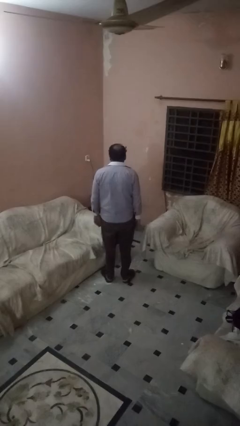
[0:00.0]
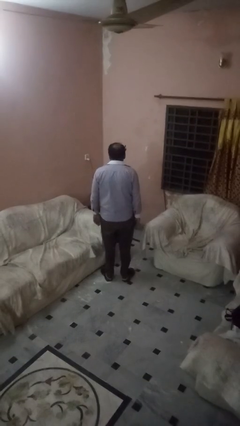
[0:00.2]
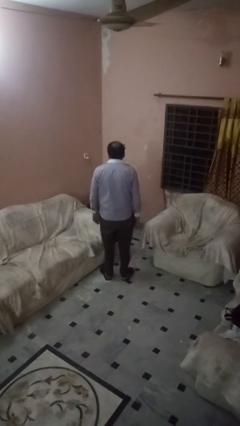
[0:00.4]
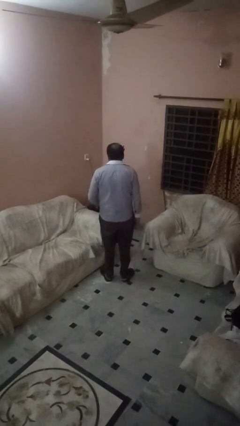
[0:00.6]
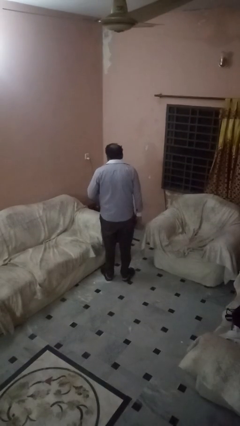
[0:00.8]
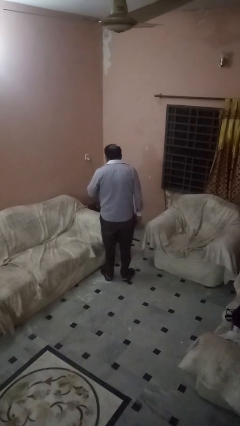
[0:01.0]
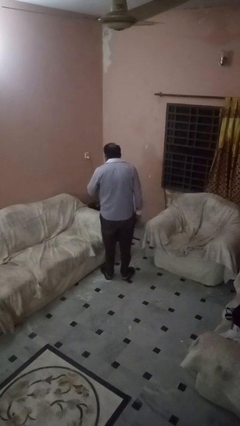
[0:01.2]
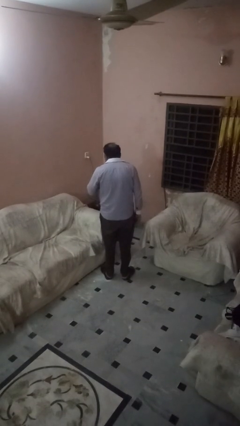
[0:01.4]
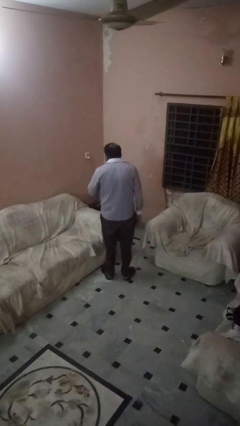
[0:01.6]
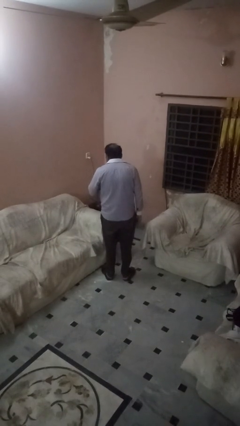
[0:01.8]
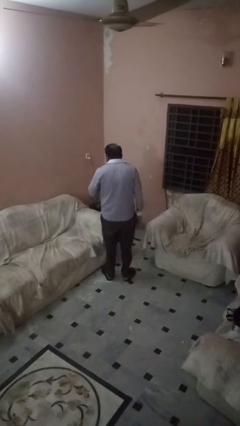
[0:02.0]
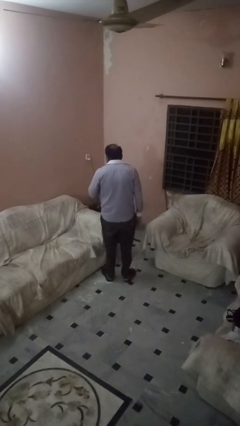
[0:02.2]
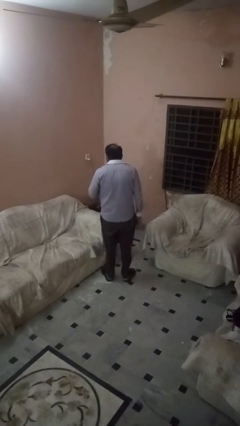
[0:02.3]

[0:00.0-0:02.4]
person gestures be quiet

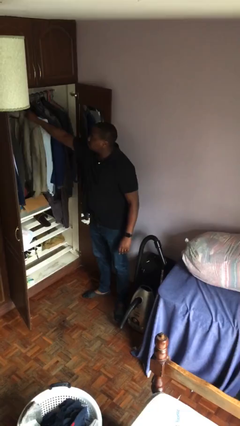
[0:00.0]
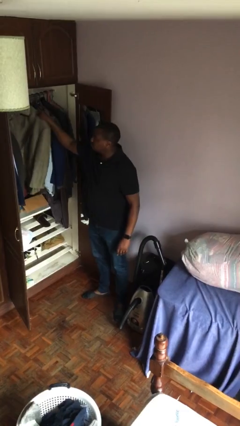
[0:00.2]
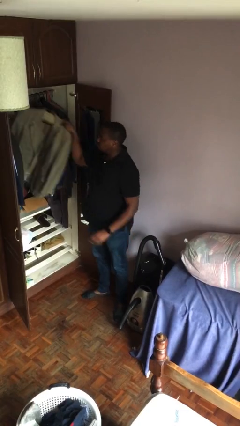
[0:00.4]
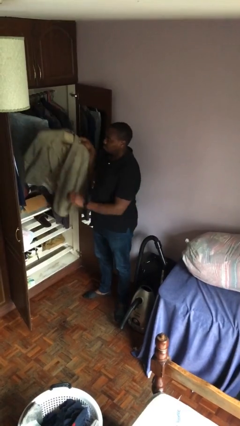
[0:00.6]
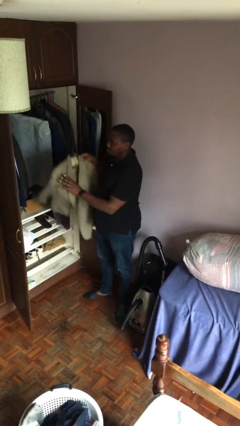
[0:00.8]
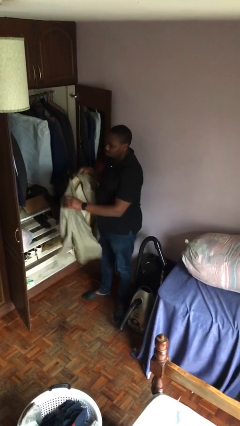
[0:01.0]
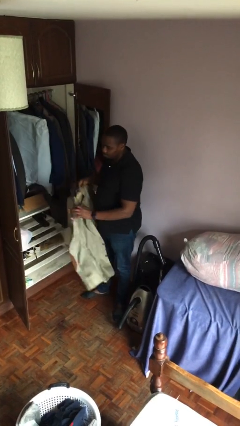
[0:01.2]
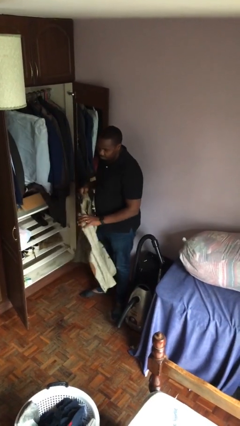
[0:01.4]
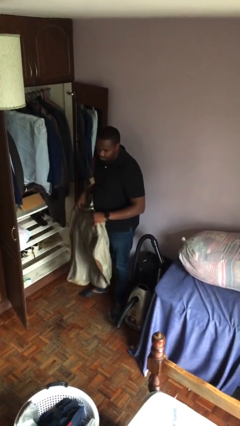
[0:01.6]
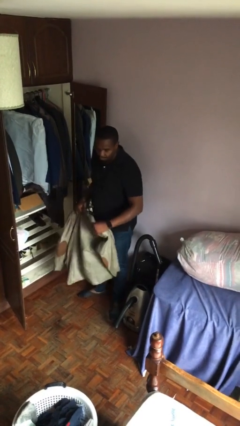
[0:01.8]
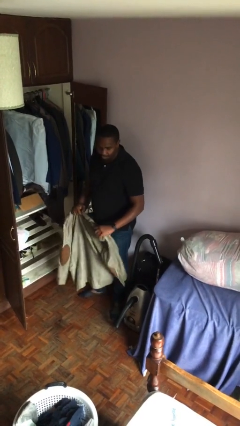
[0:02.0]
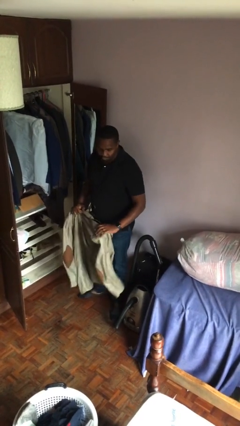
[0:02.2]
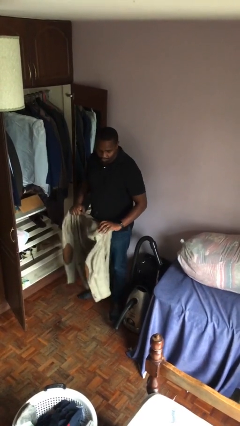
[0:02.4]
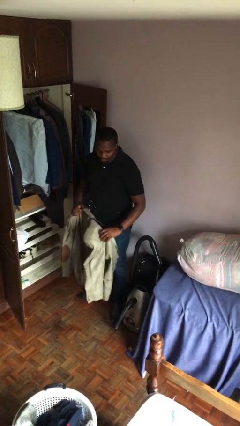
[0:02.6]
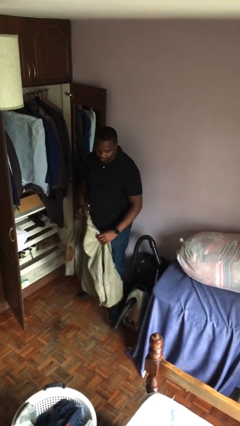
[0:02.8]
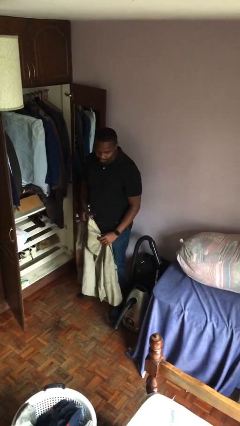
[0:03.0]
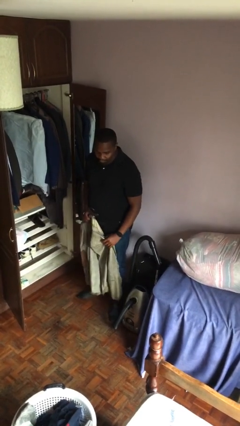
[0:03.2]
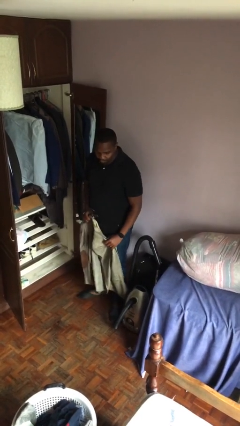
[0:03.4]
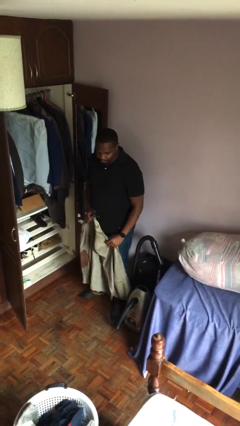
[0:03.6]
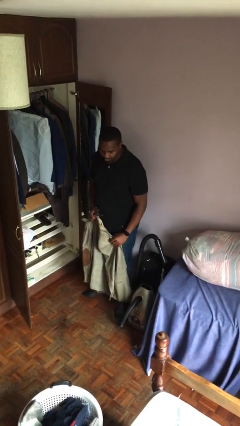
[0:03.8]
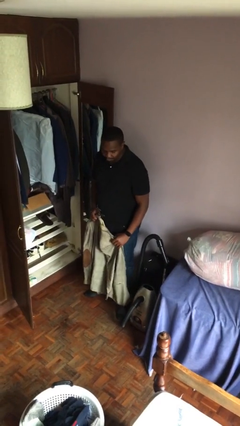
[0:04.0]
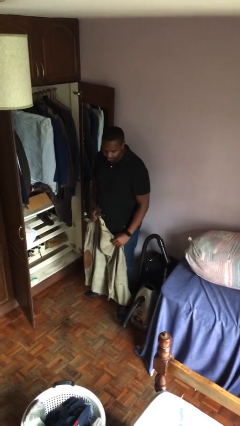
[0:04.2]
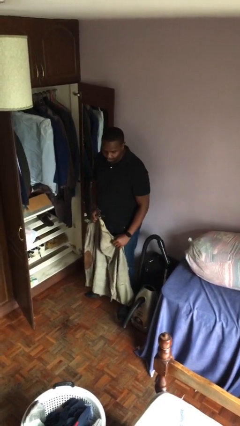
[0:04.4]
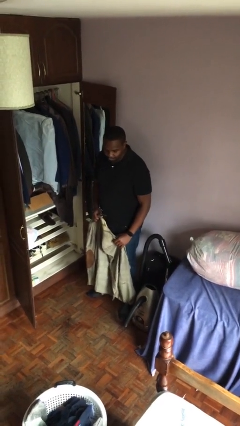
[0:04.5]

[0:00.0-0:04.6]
person takes clothes from closet

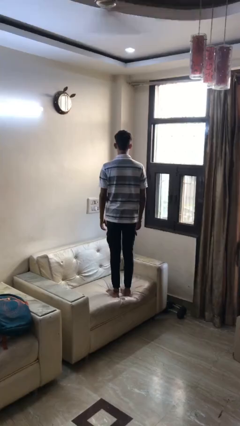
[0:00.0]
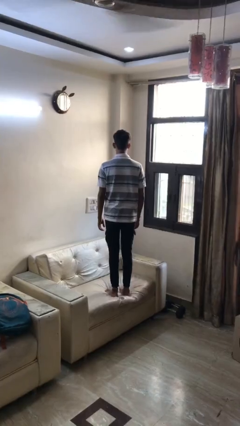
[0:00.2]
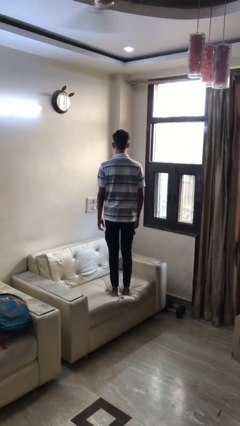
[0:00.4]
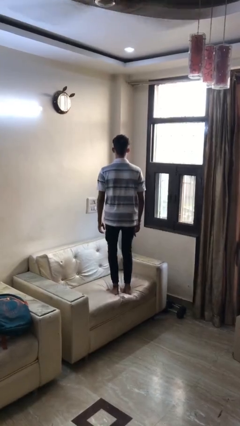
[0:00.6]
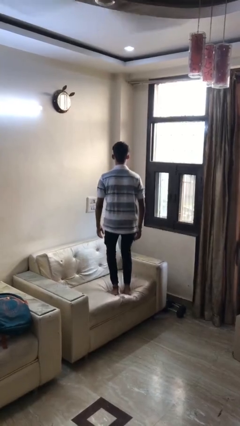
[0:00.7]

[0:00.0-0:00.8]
person jumps on couch

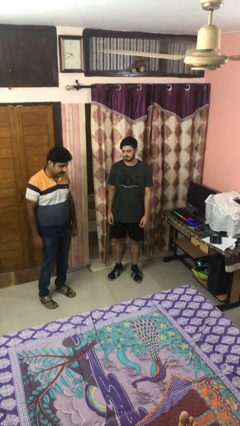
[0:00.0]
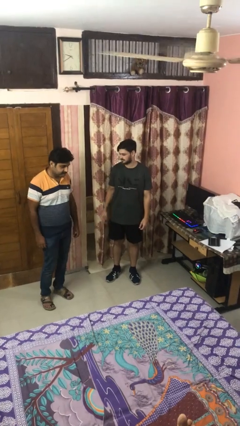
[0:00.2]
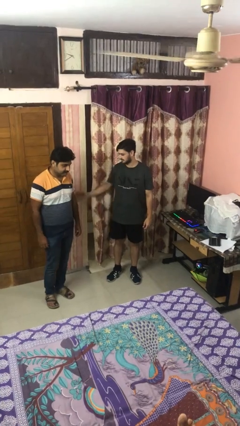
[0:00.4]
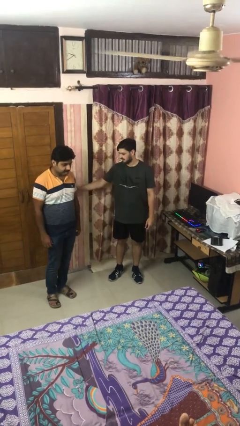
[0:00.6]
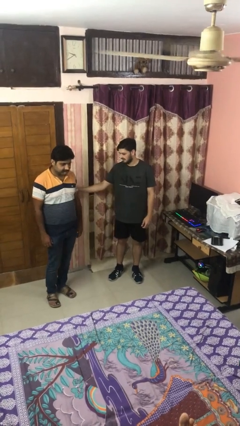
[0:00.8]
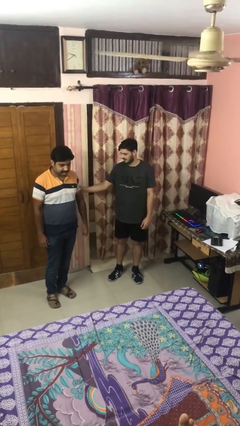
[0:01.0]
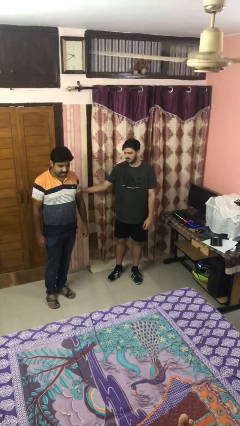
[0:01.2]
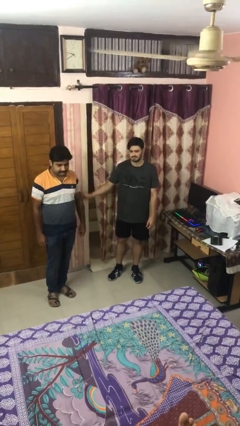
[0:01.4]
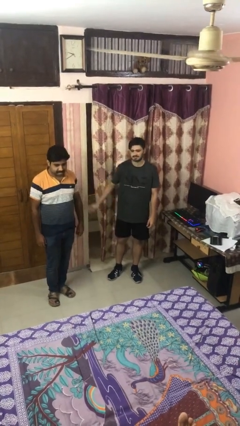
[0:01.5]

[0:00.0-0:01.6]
person grabs person by bicep

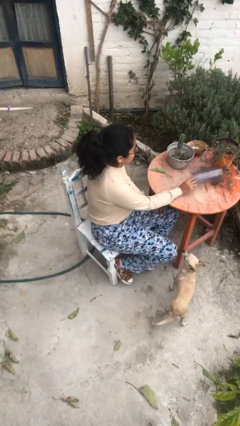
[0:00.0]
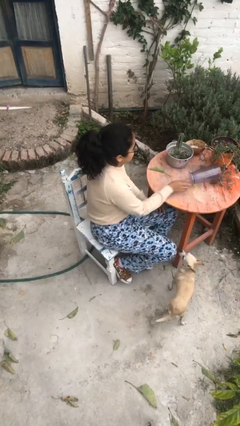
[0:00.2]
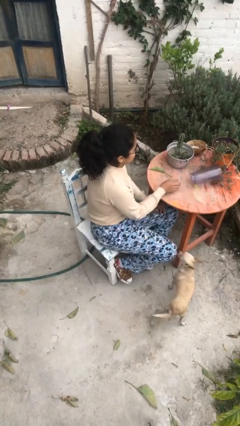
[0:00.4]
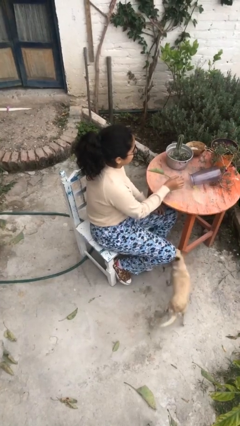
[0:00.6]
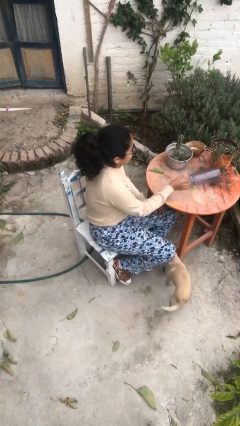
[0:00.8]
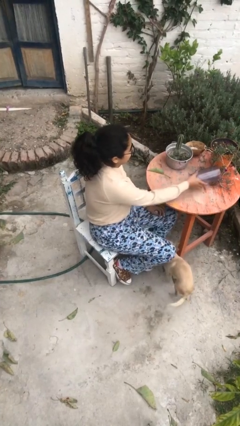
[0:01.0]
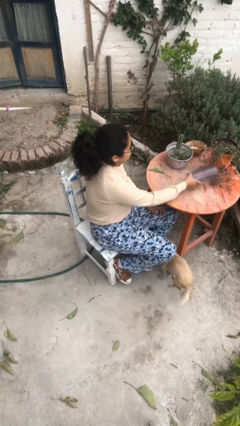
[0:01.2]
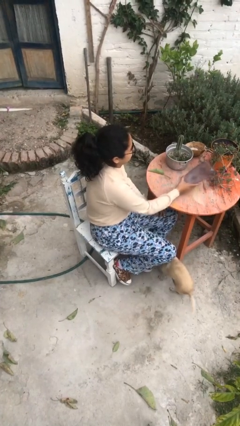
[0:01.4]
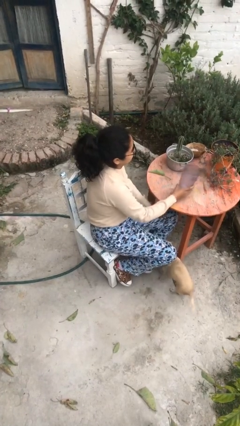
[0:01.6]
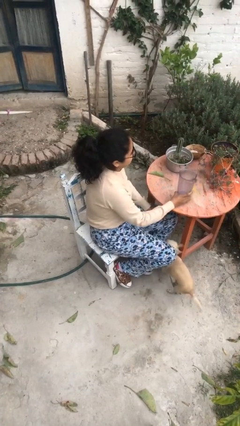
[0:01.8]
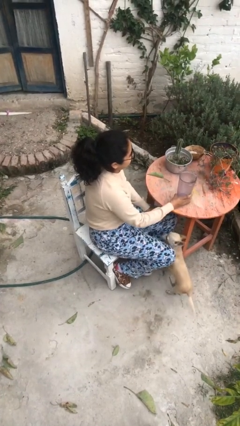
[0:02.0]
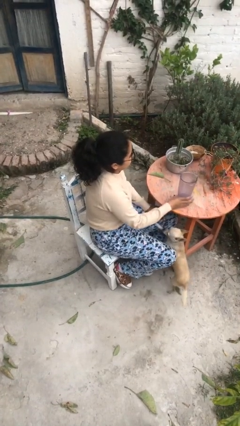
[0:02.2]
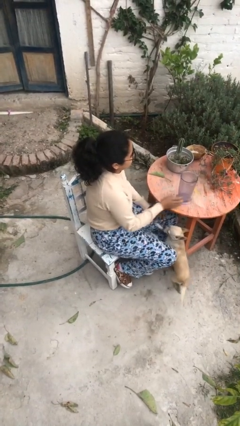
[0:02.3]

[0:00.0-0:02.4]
person sets upright glass

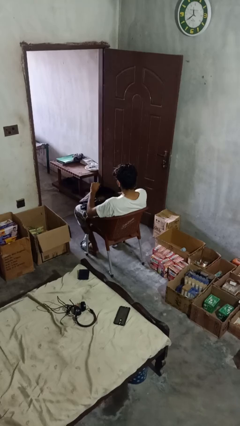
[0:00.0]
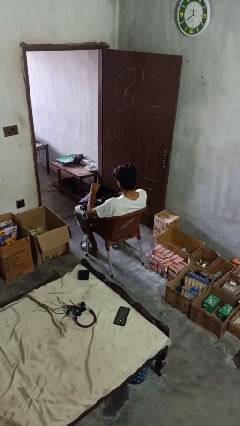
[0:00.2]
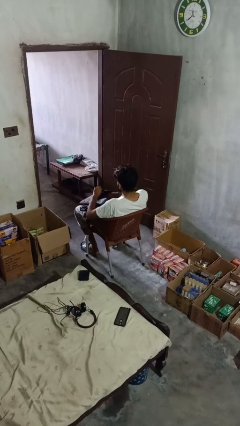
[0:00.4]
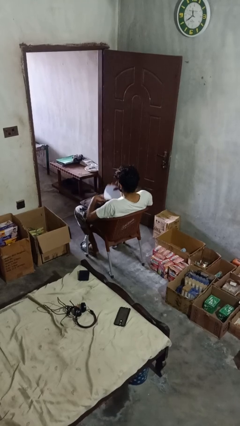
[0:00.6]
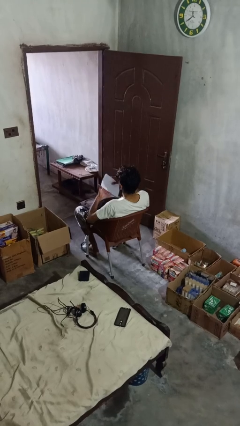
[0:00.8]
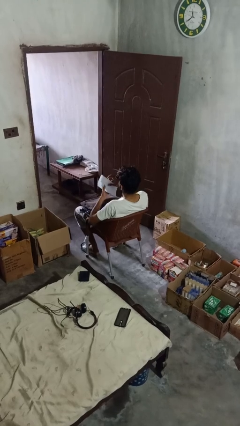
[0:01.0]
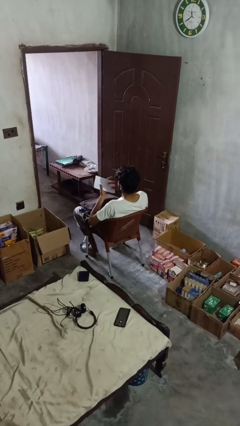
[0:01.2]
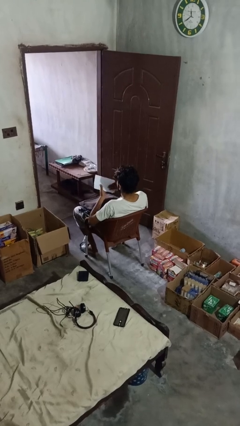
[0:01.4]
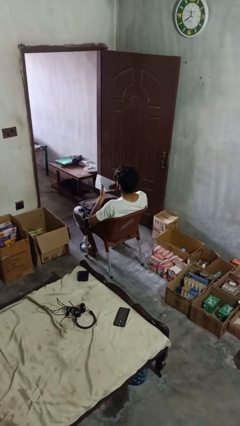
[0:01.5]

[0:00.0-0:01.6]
person takes object from backpack

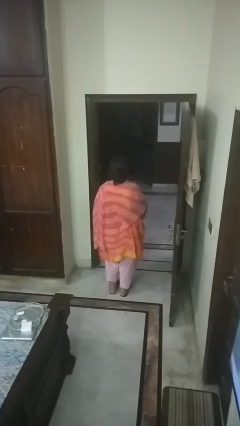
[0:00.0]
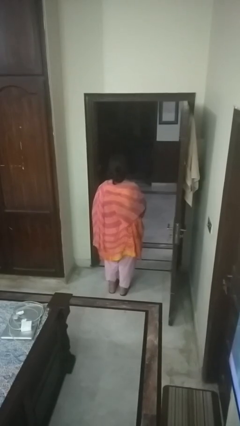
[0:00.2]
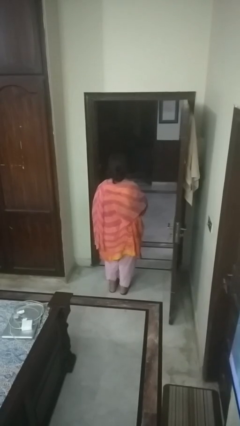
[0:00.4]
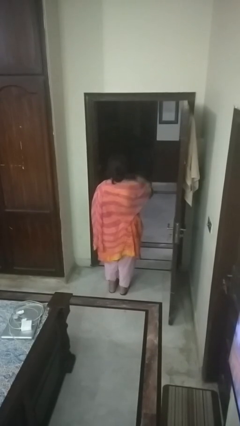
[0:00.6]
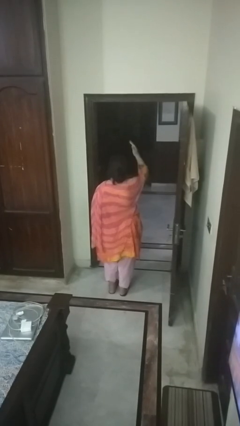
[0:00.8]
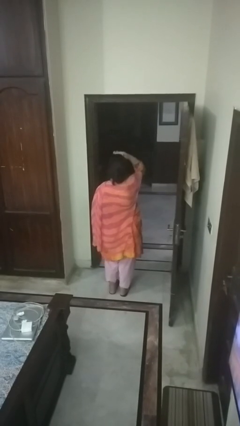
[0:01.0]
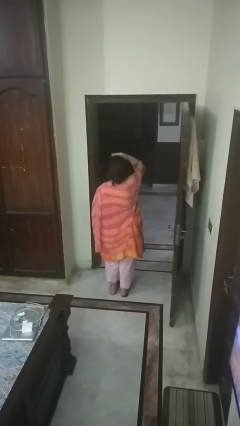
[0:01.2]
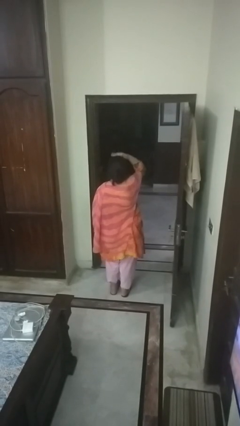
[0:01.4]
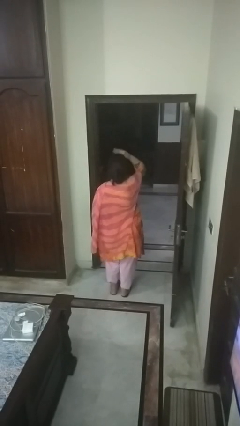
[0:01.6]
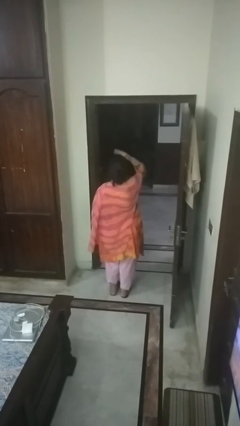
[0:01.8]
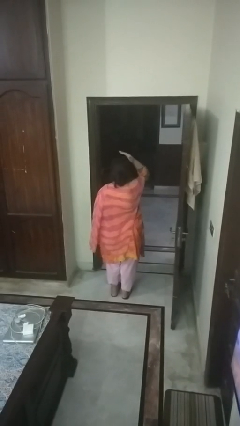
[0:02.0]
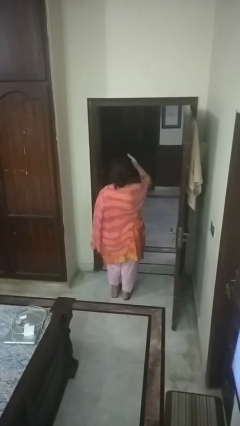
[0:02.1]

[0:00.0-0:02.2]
person pats head

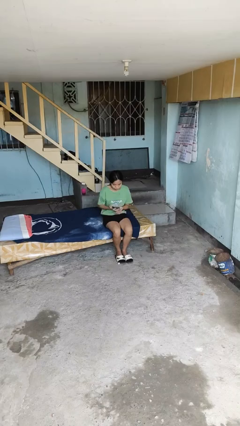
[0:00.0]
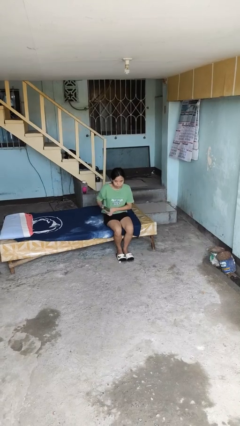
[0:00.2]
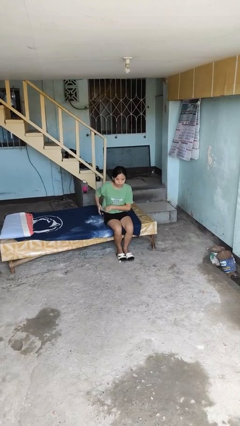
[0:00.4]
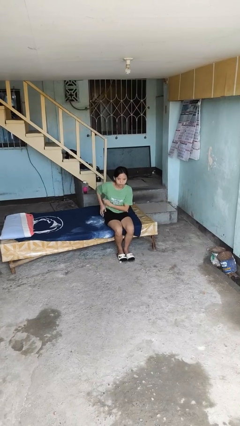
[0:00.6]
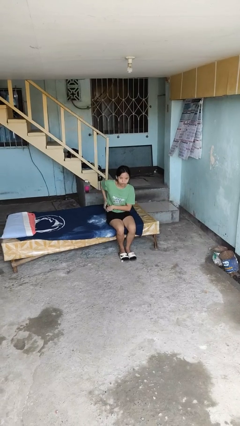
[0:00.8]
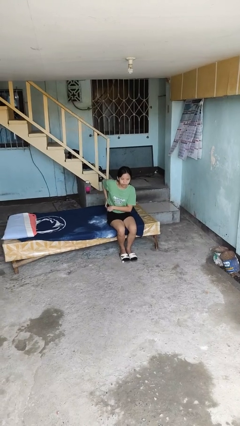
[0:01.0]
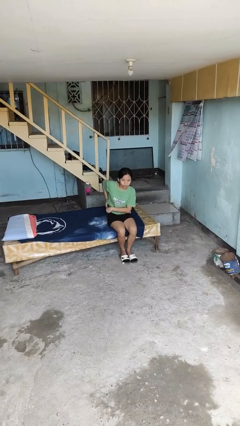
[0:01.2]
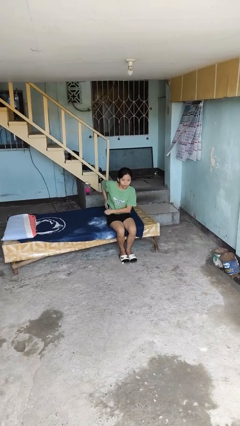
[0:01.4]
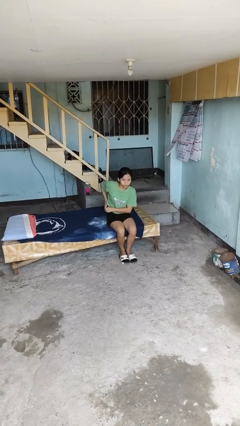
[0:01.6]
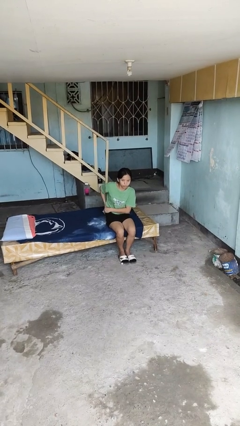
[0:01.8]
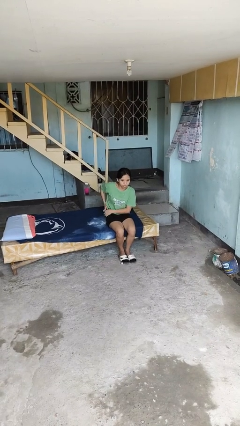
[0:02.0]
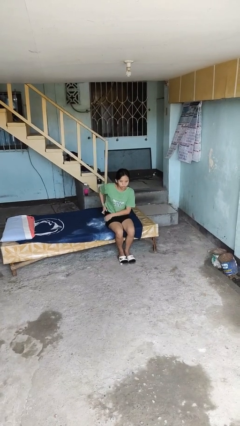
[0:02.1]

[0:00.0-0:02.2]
person puts phone into pocket
